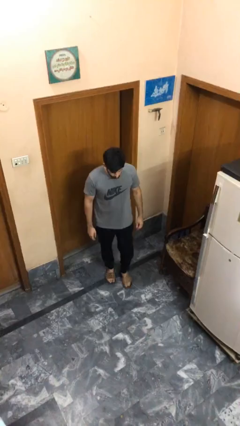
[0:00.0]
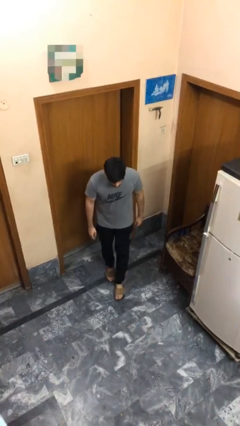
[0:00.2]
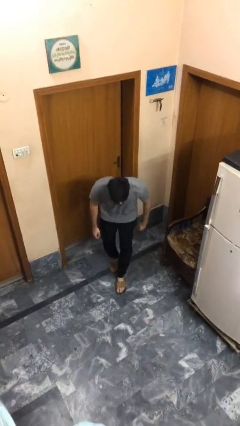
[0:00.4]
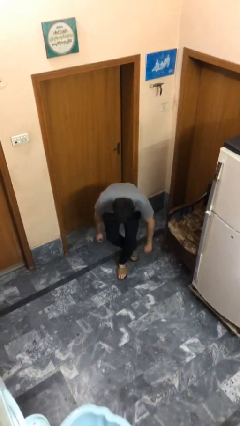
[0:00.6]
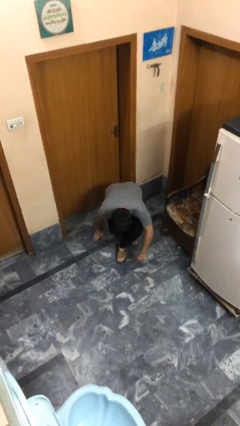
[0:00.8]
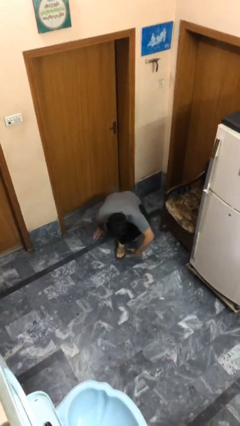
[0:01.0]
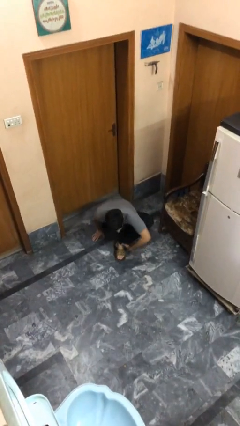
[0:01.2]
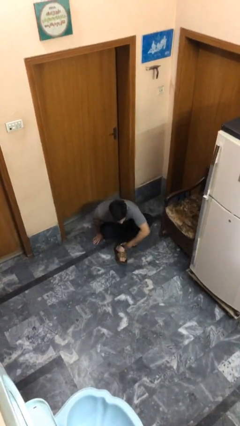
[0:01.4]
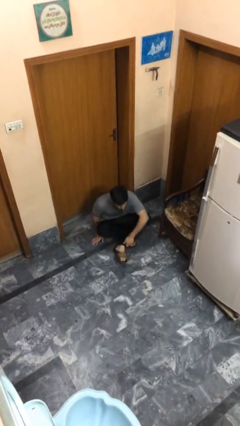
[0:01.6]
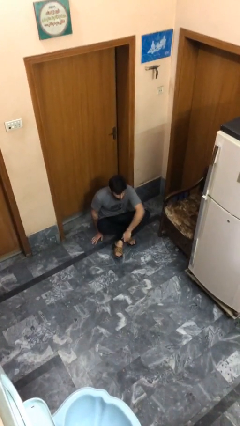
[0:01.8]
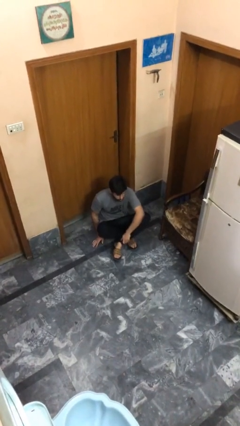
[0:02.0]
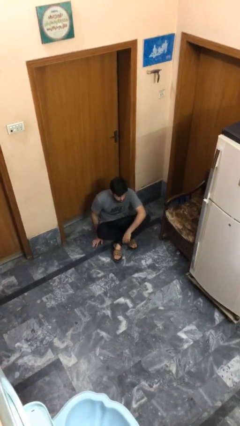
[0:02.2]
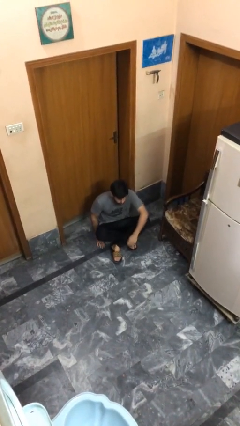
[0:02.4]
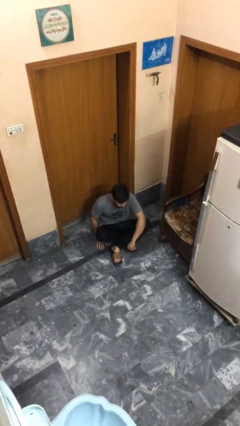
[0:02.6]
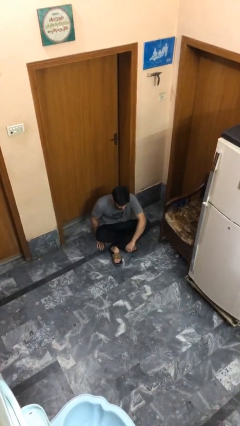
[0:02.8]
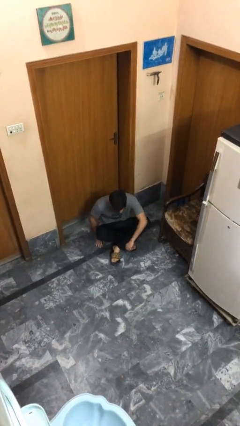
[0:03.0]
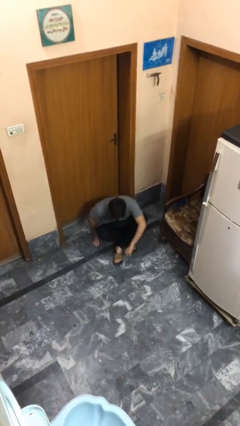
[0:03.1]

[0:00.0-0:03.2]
person sits crisscross

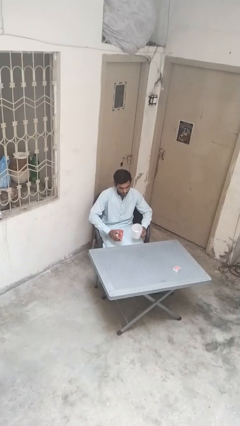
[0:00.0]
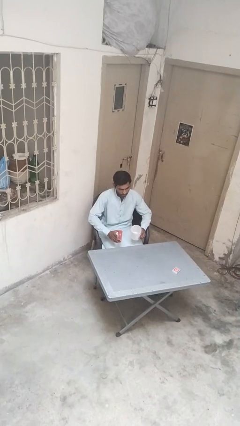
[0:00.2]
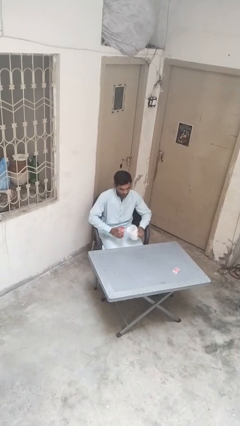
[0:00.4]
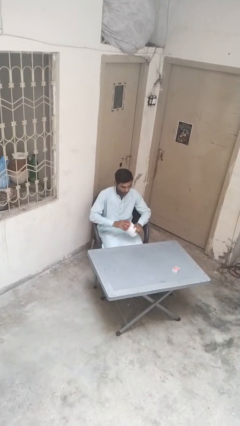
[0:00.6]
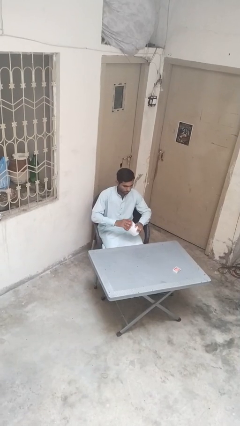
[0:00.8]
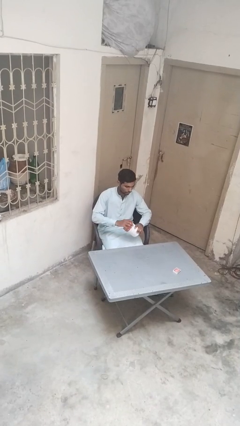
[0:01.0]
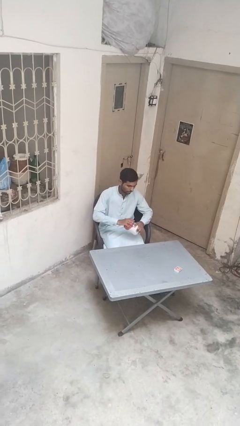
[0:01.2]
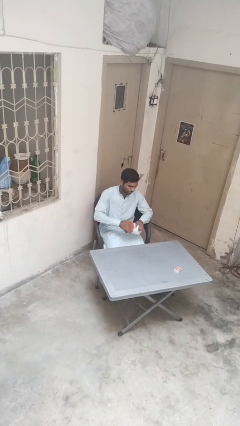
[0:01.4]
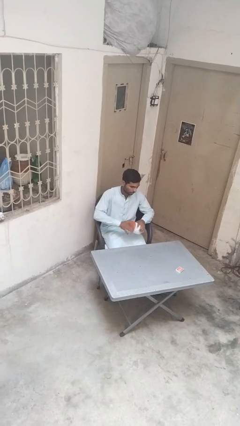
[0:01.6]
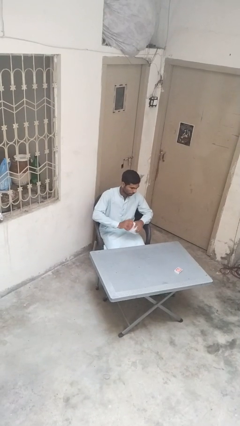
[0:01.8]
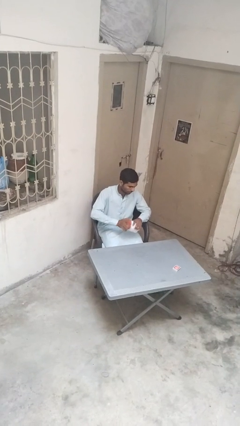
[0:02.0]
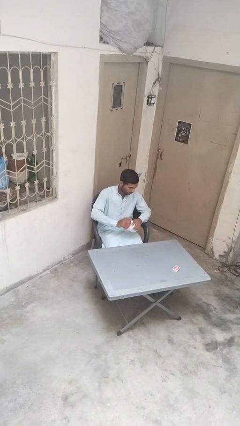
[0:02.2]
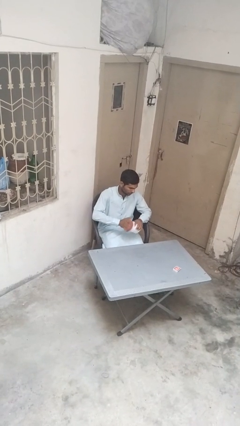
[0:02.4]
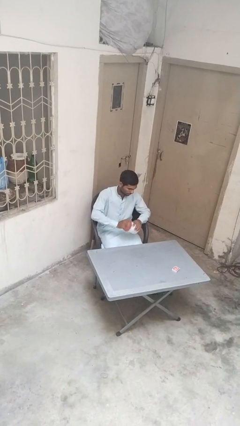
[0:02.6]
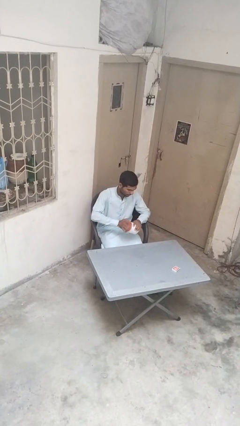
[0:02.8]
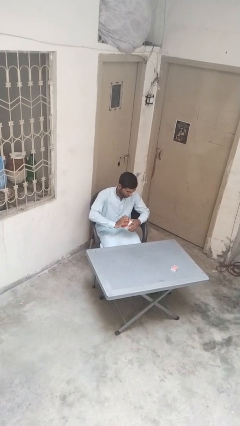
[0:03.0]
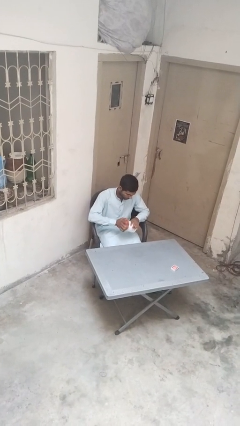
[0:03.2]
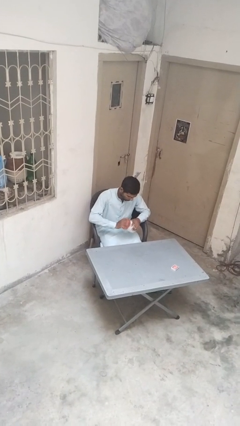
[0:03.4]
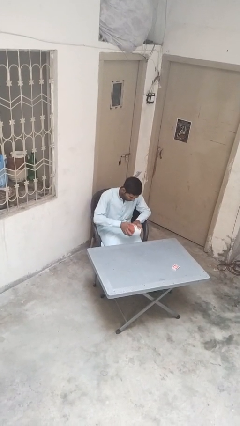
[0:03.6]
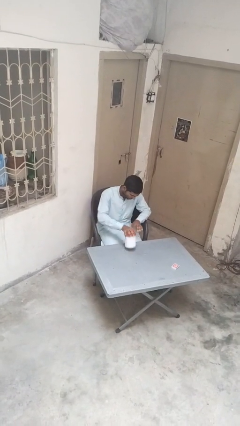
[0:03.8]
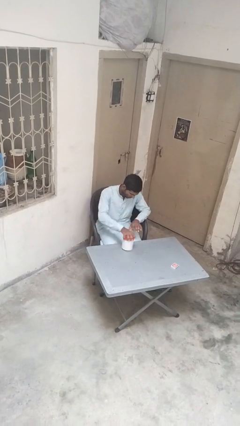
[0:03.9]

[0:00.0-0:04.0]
person closes jar

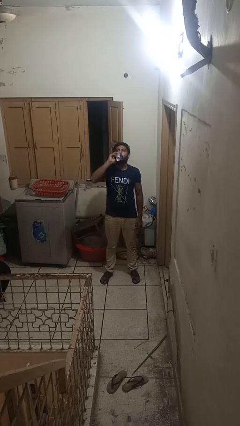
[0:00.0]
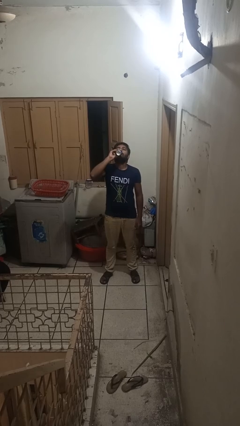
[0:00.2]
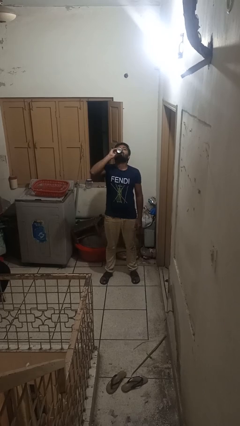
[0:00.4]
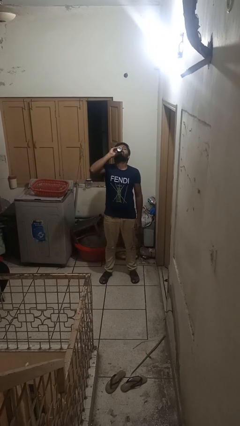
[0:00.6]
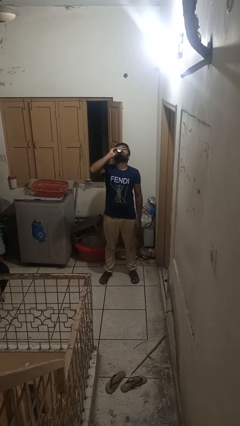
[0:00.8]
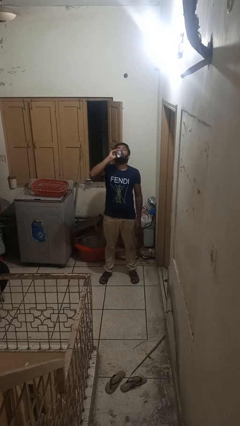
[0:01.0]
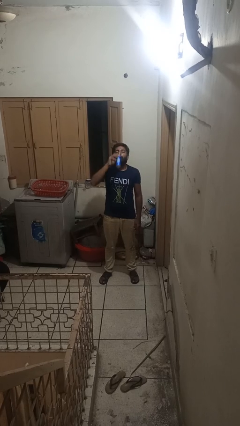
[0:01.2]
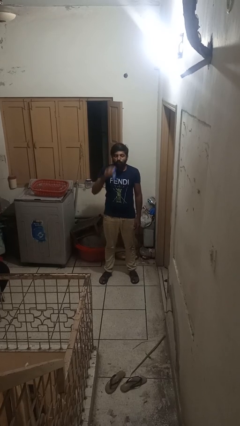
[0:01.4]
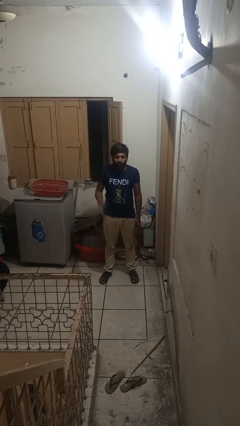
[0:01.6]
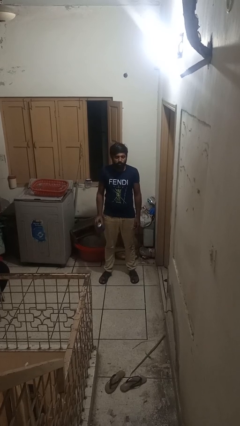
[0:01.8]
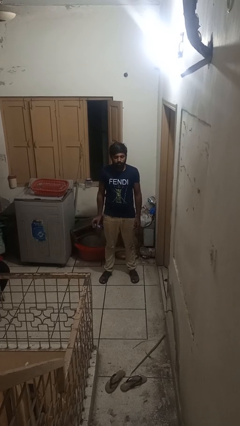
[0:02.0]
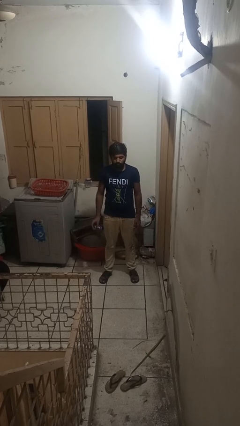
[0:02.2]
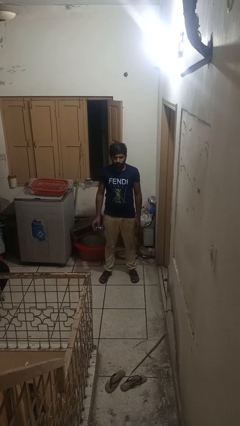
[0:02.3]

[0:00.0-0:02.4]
person drinks from beverage can

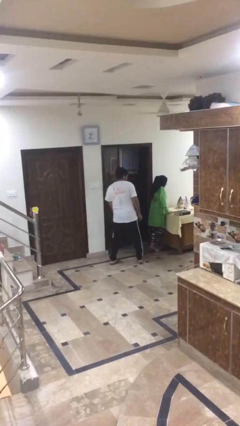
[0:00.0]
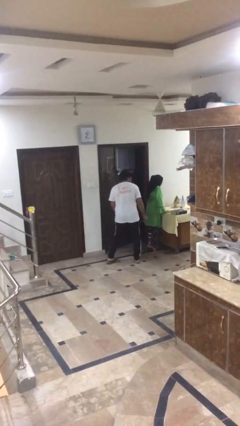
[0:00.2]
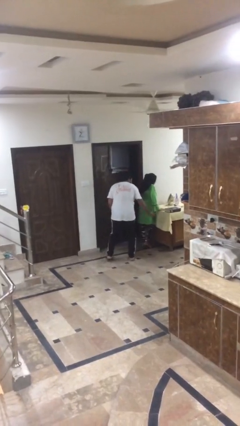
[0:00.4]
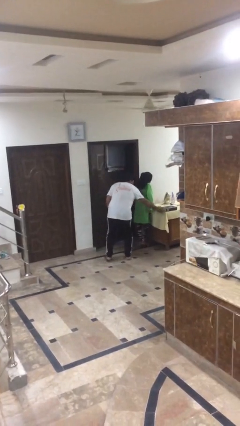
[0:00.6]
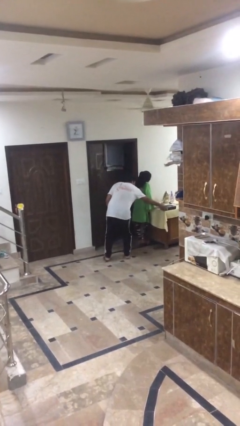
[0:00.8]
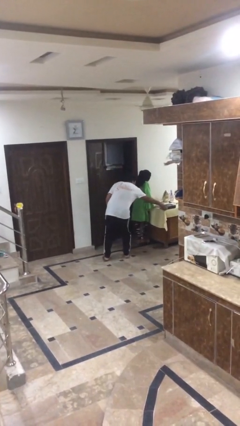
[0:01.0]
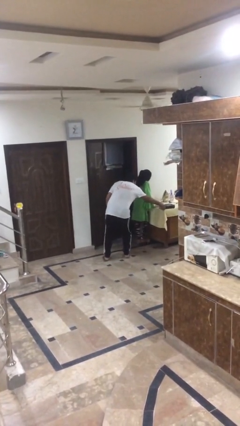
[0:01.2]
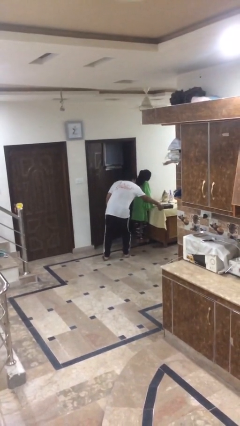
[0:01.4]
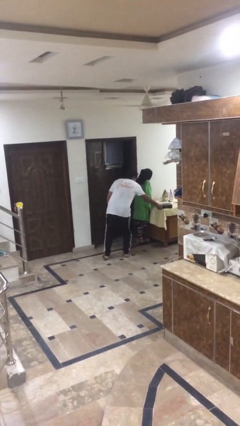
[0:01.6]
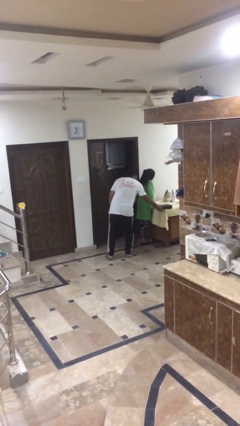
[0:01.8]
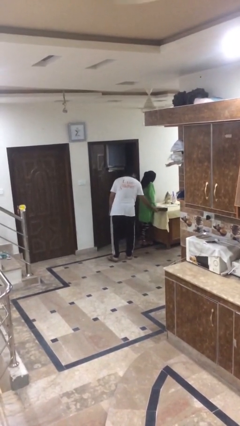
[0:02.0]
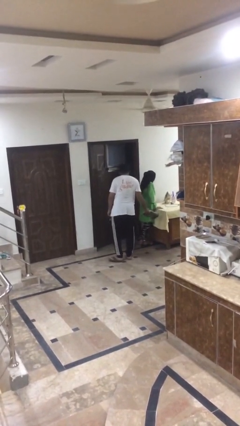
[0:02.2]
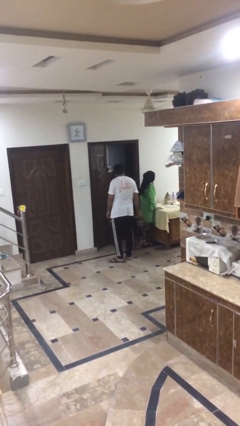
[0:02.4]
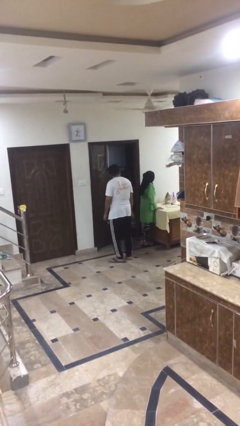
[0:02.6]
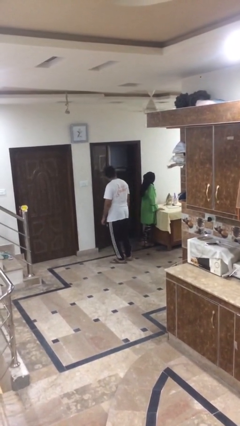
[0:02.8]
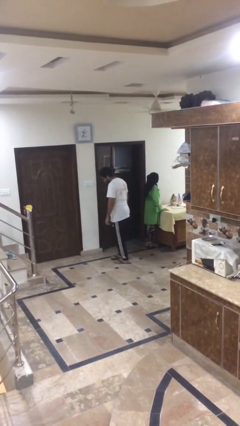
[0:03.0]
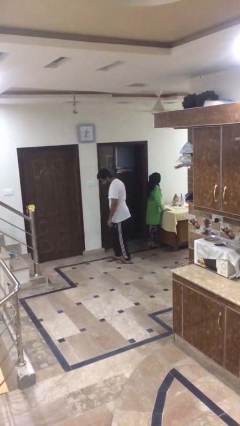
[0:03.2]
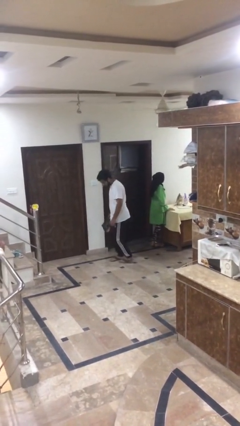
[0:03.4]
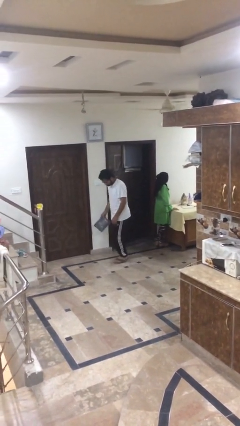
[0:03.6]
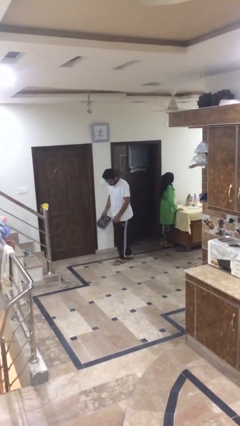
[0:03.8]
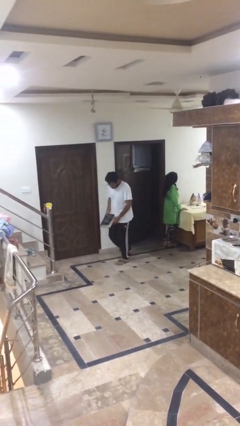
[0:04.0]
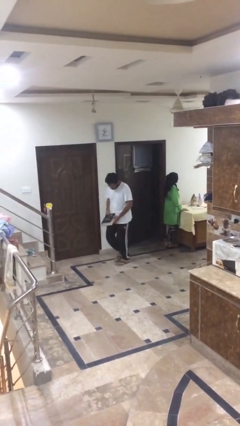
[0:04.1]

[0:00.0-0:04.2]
person steals object from person

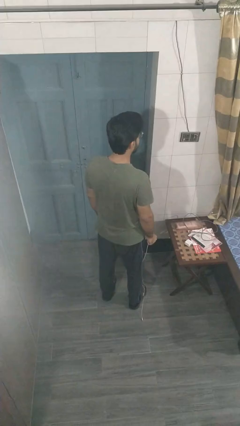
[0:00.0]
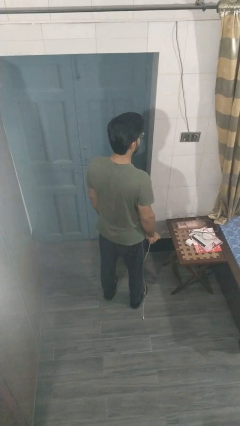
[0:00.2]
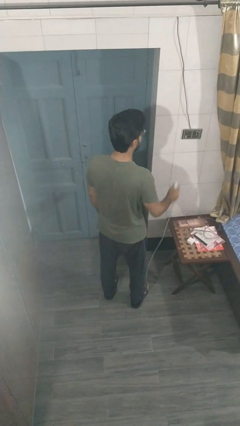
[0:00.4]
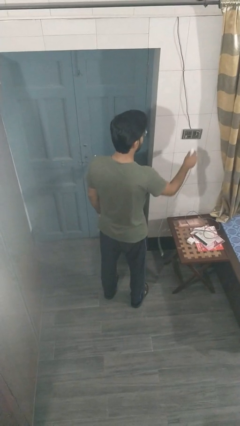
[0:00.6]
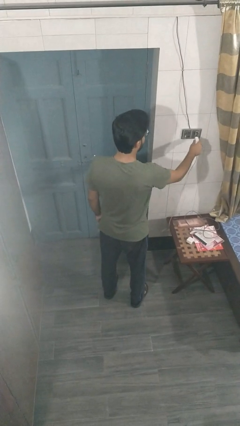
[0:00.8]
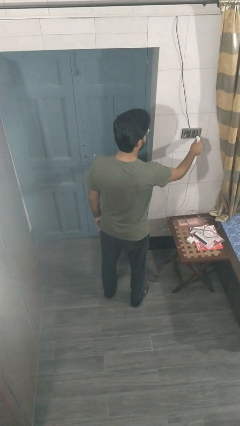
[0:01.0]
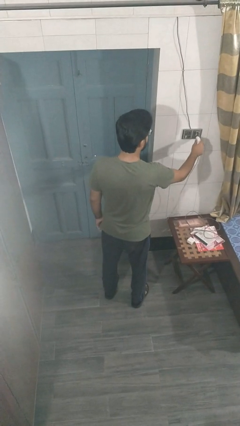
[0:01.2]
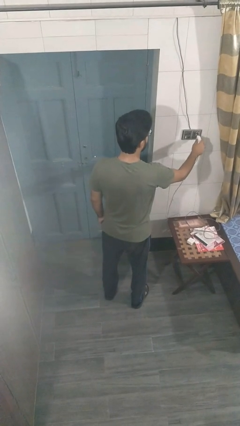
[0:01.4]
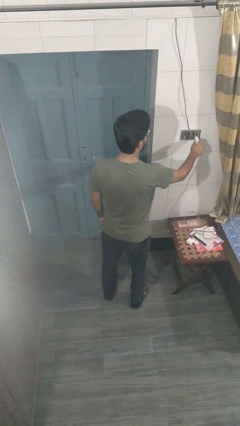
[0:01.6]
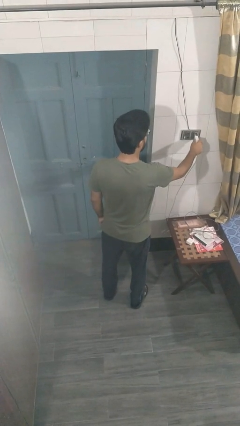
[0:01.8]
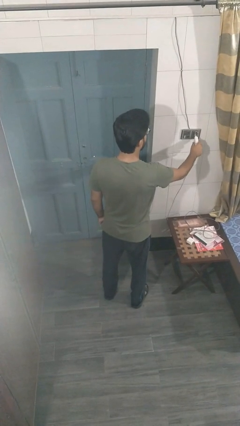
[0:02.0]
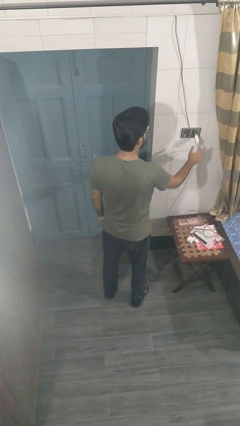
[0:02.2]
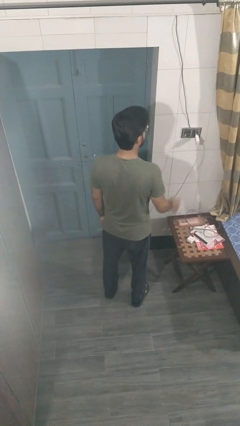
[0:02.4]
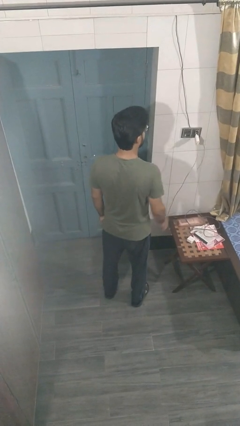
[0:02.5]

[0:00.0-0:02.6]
person plugs into electrical socket

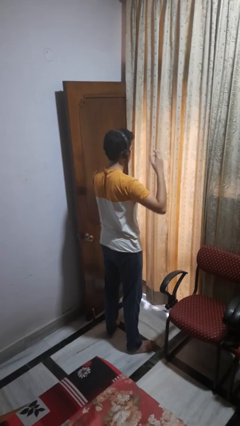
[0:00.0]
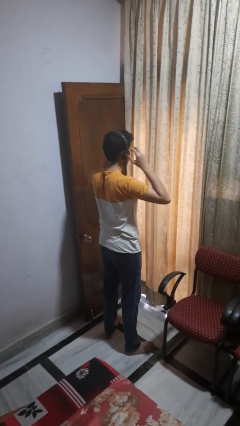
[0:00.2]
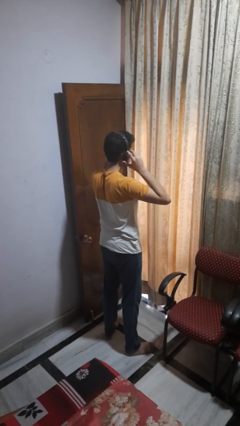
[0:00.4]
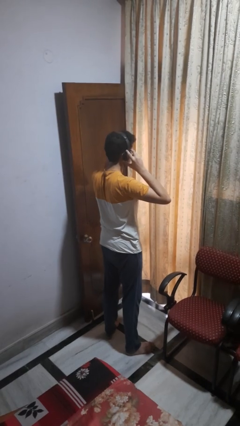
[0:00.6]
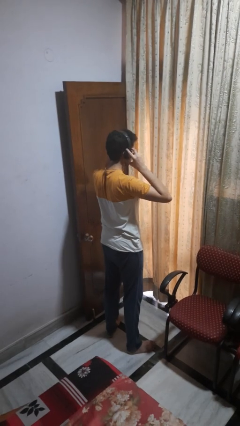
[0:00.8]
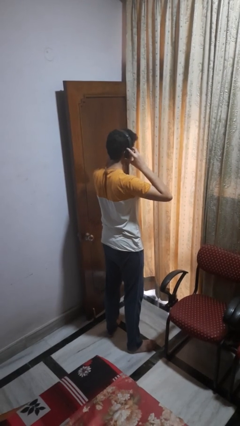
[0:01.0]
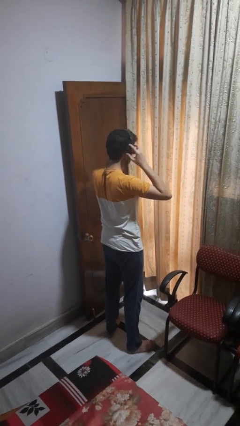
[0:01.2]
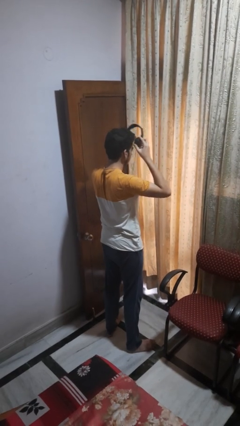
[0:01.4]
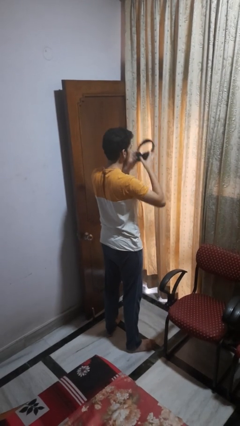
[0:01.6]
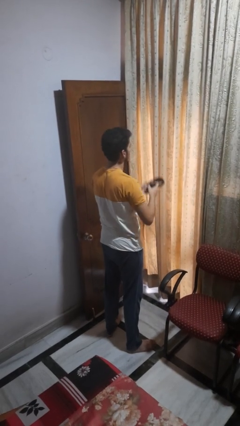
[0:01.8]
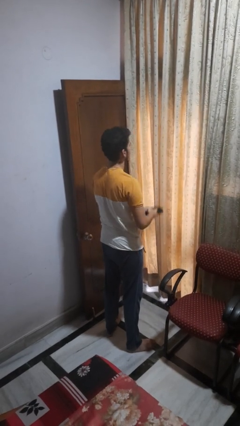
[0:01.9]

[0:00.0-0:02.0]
person takes off headphones
